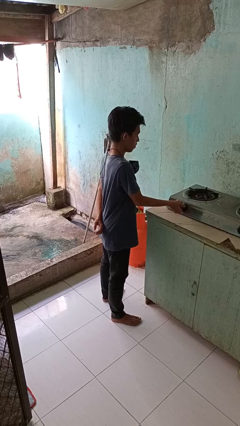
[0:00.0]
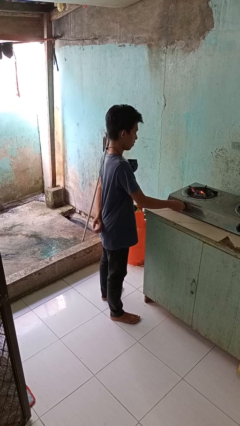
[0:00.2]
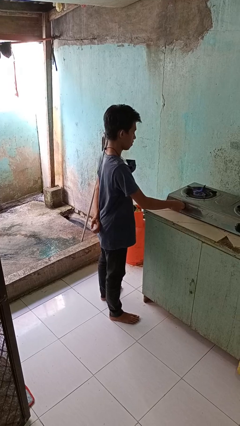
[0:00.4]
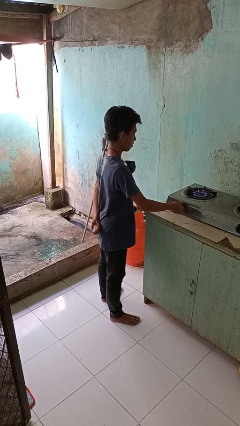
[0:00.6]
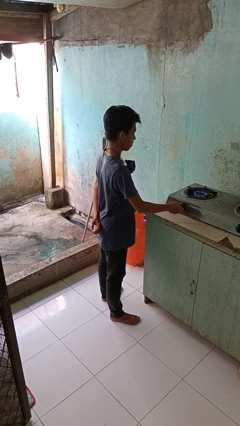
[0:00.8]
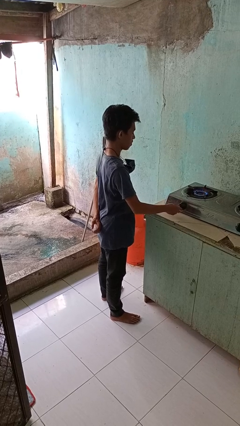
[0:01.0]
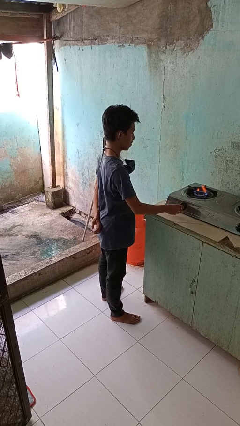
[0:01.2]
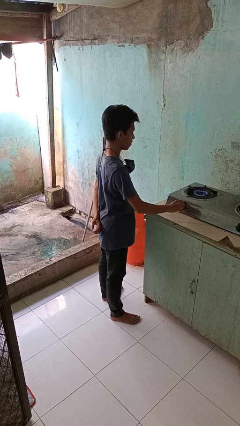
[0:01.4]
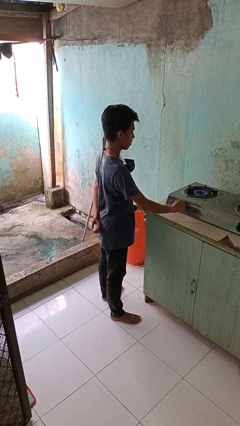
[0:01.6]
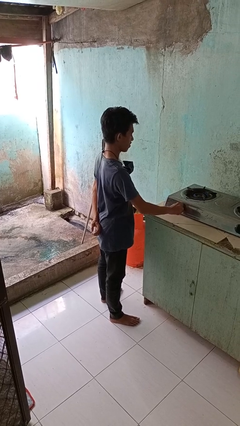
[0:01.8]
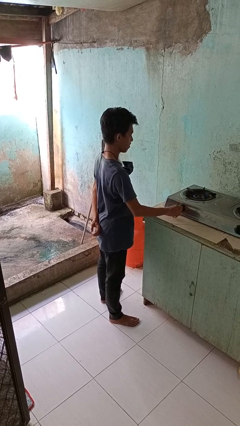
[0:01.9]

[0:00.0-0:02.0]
person turns on stovetop

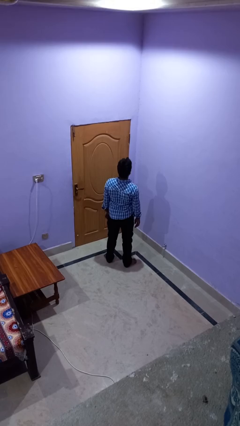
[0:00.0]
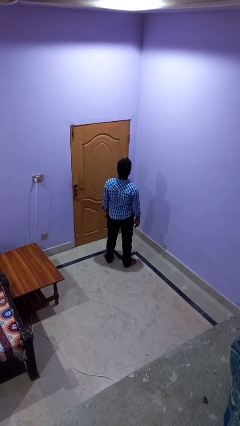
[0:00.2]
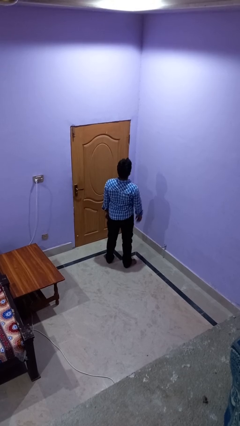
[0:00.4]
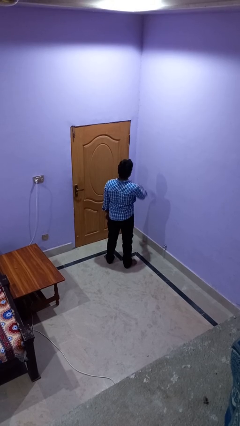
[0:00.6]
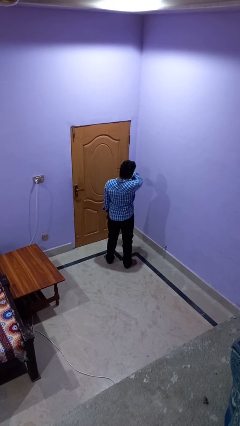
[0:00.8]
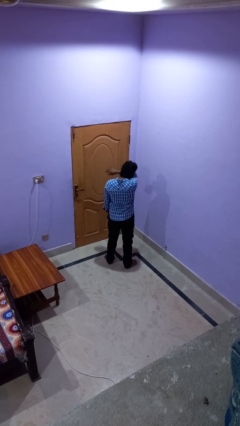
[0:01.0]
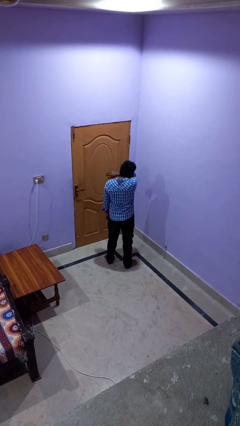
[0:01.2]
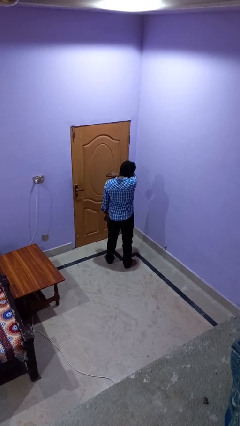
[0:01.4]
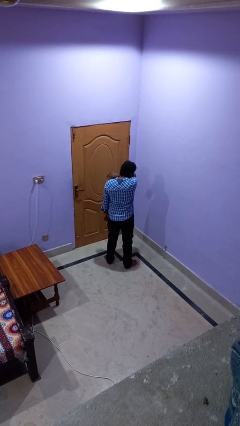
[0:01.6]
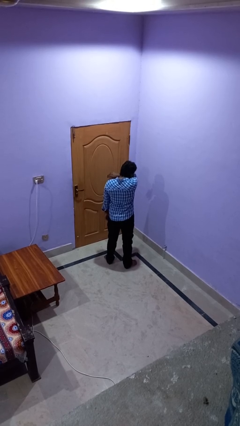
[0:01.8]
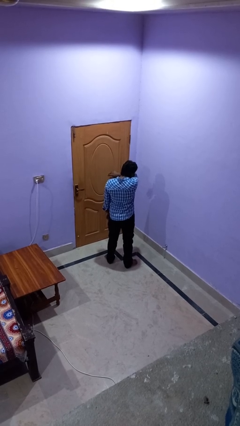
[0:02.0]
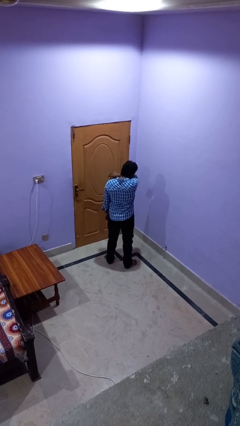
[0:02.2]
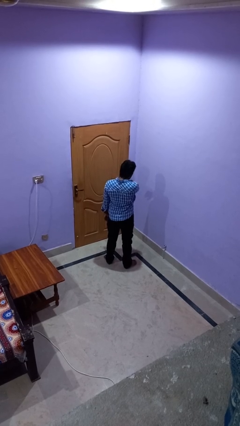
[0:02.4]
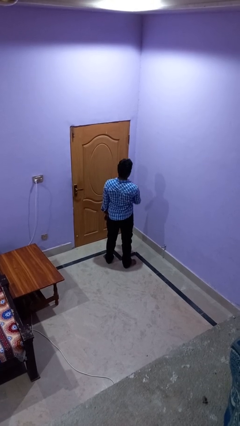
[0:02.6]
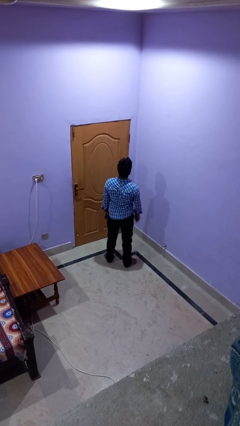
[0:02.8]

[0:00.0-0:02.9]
person sneezes into arm

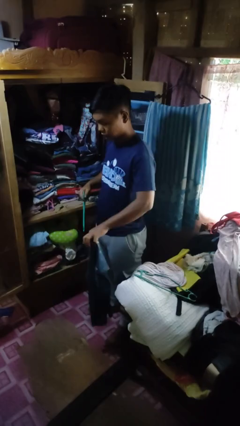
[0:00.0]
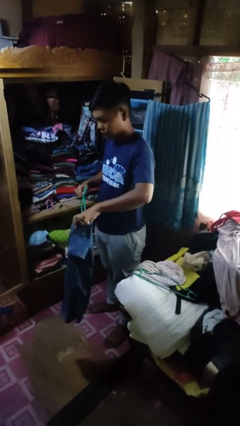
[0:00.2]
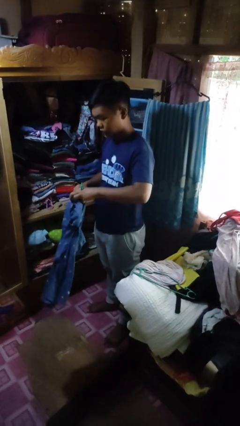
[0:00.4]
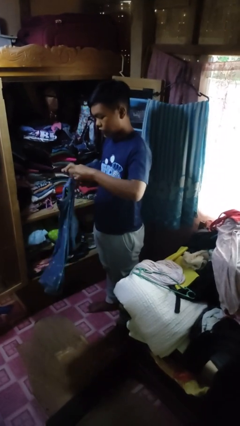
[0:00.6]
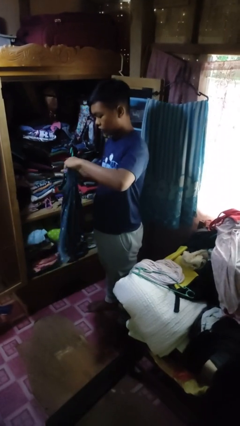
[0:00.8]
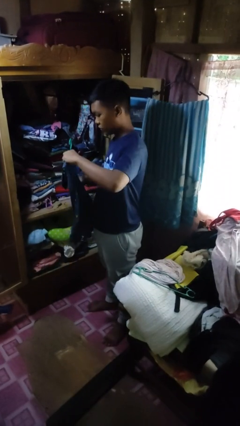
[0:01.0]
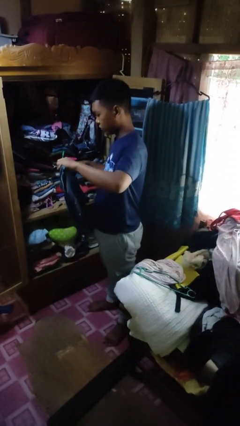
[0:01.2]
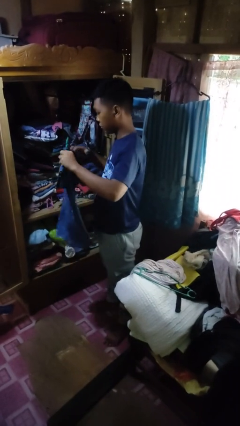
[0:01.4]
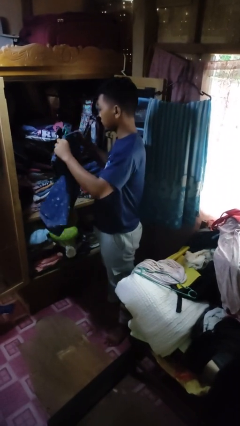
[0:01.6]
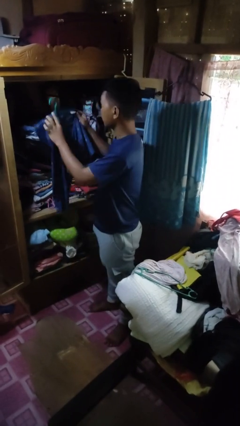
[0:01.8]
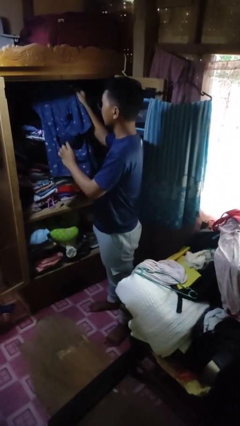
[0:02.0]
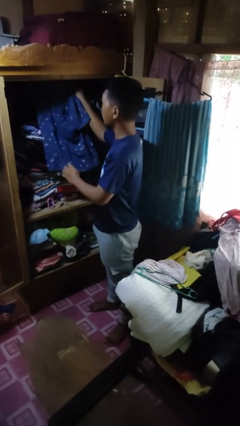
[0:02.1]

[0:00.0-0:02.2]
person puts clothes into closet

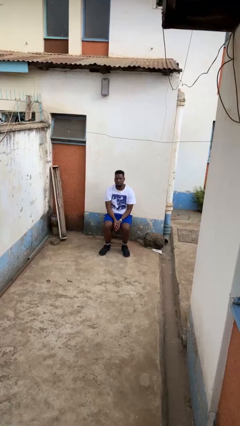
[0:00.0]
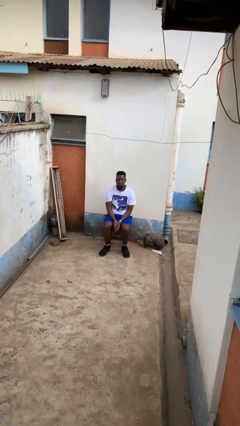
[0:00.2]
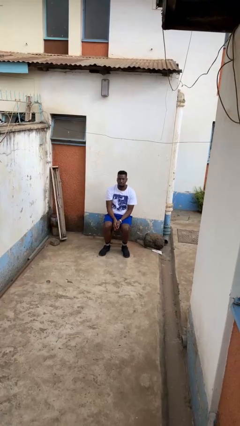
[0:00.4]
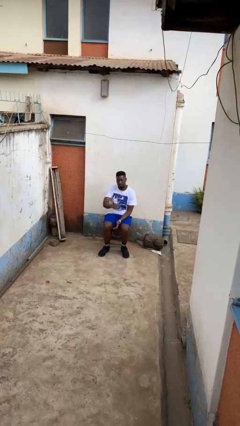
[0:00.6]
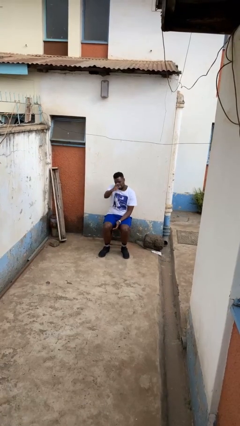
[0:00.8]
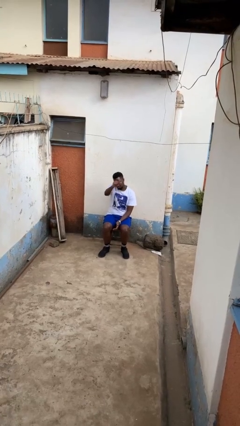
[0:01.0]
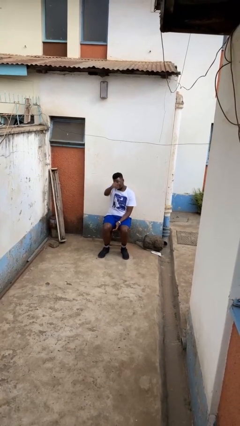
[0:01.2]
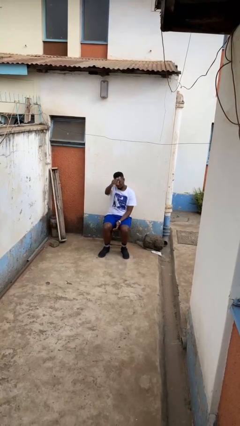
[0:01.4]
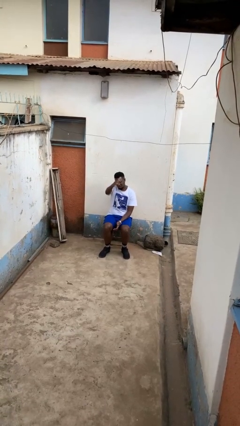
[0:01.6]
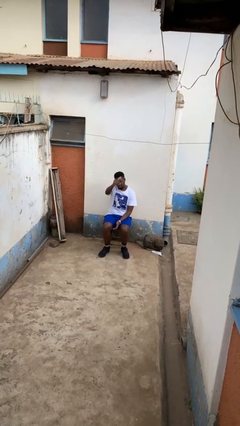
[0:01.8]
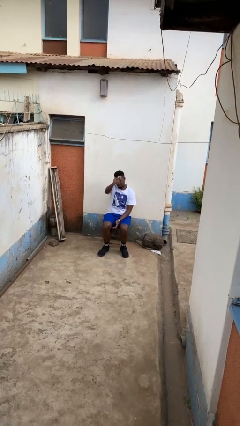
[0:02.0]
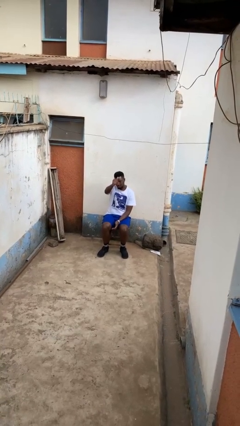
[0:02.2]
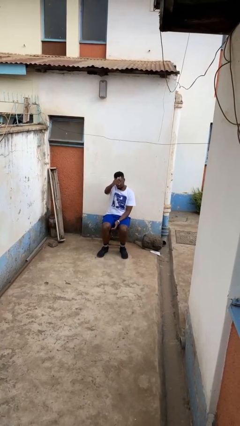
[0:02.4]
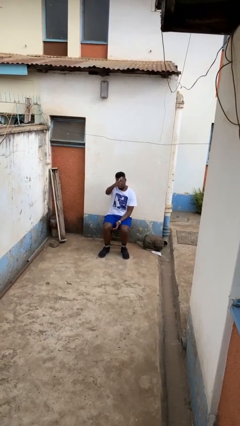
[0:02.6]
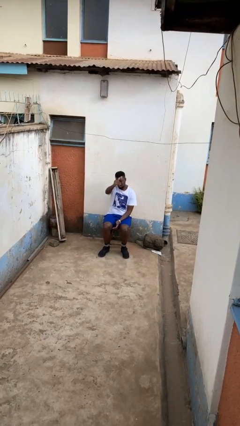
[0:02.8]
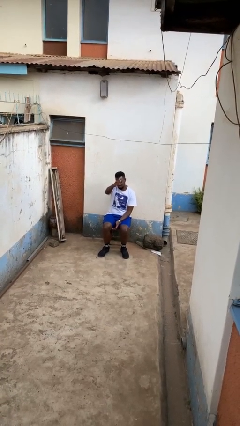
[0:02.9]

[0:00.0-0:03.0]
person gestures come here

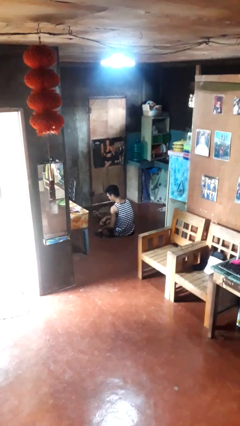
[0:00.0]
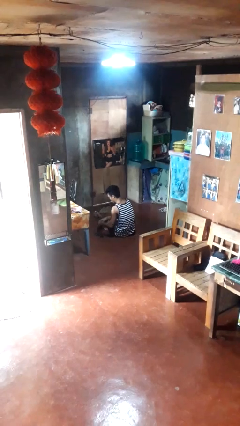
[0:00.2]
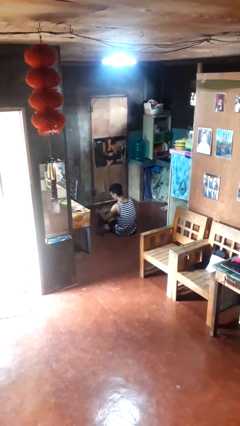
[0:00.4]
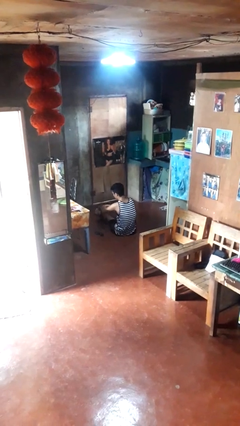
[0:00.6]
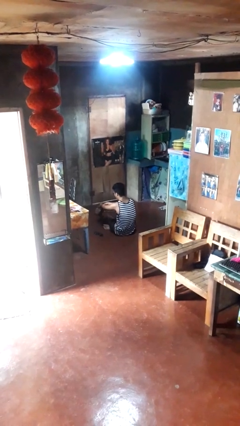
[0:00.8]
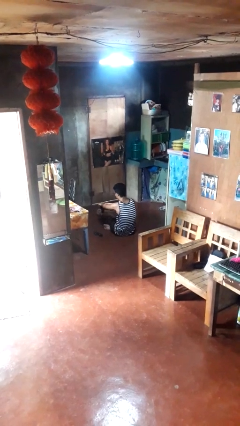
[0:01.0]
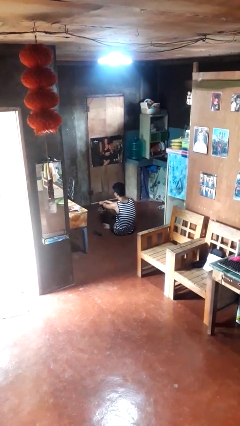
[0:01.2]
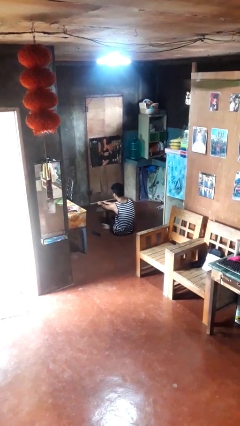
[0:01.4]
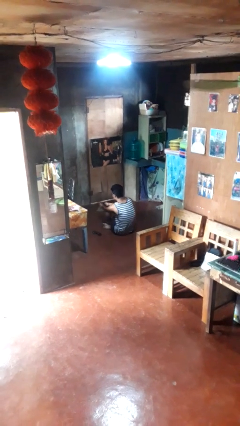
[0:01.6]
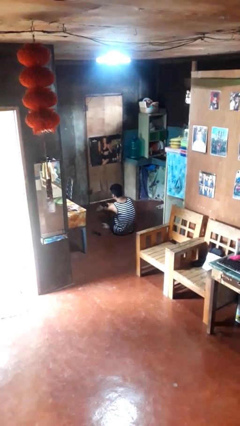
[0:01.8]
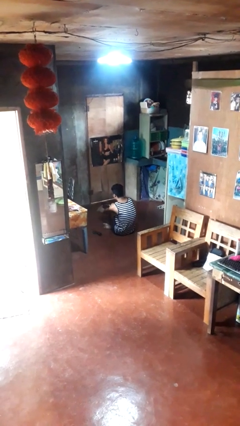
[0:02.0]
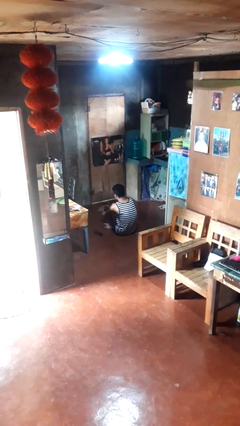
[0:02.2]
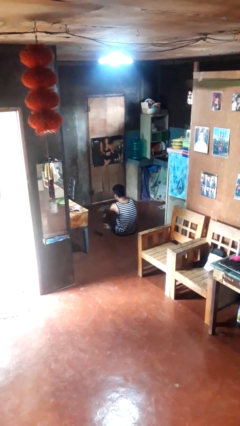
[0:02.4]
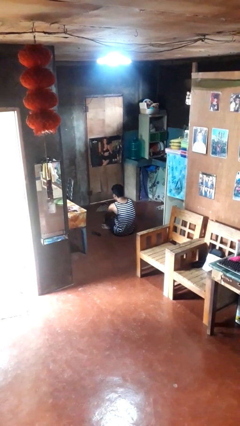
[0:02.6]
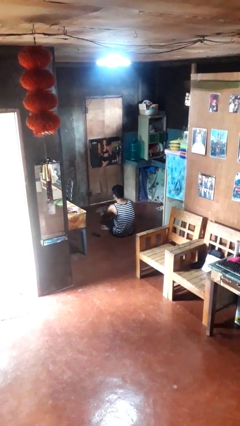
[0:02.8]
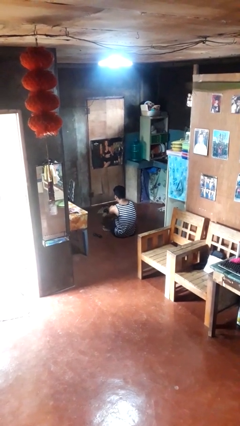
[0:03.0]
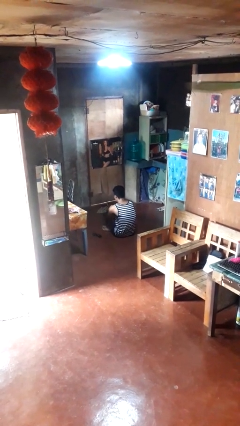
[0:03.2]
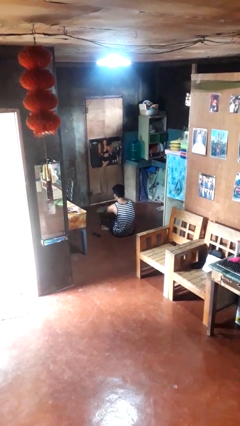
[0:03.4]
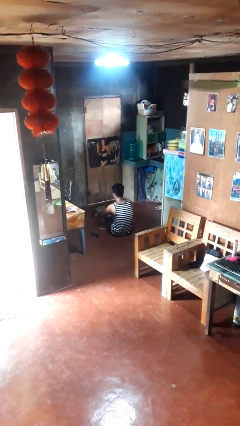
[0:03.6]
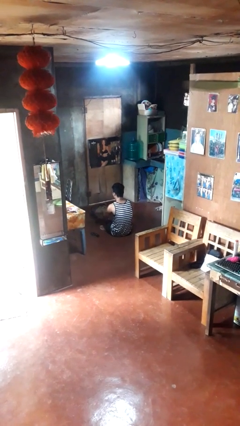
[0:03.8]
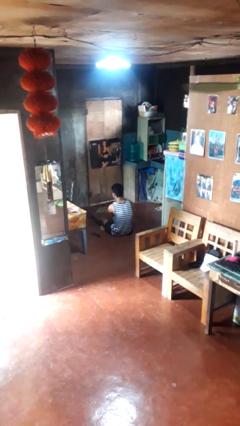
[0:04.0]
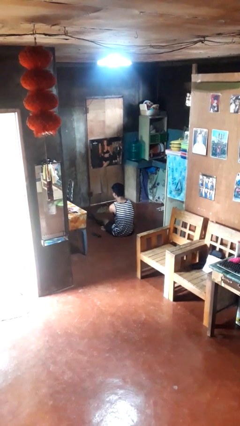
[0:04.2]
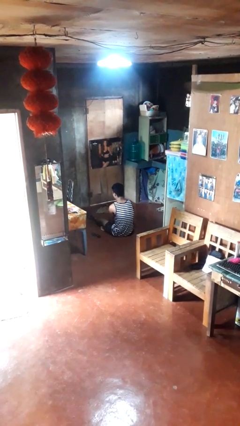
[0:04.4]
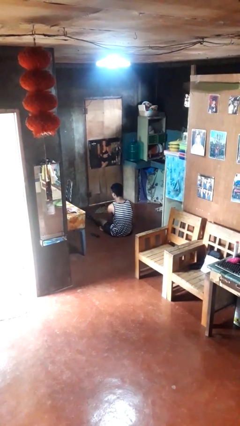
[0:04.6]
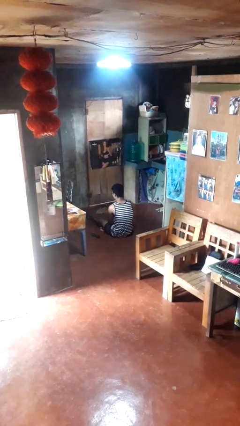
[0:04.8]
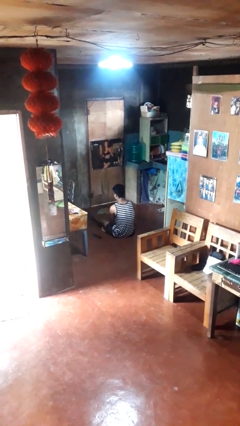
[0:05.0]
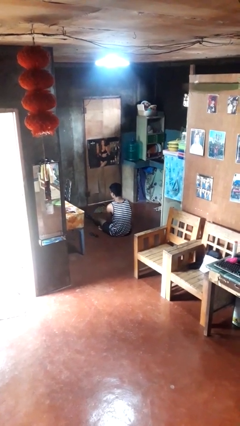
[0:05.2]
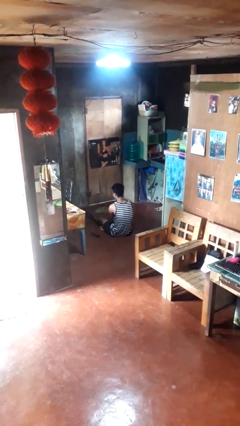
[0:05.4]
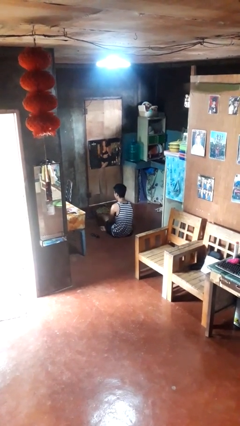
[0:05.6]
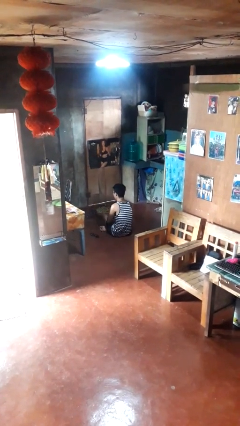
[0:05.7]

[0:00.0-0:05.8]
person puts on socks

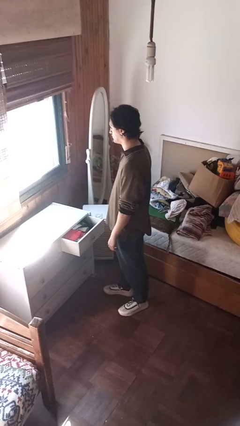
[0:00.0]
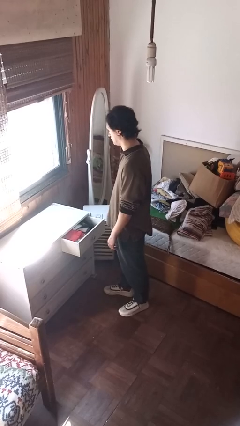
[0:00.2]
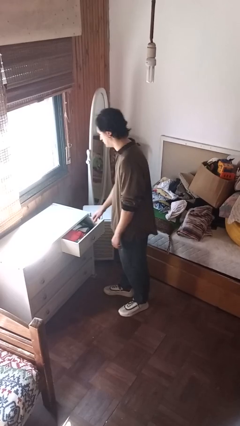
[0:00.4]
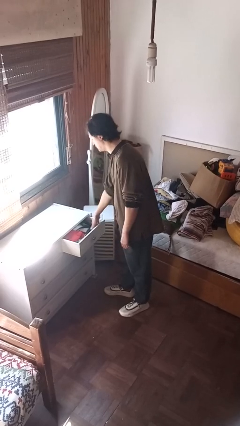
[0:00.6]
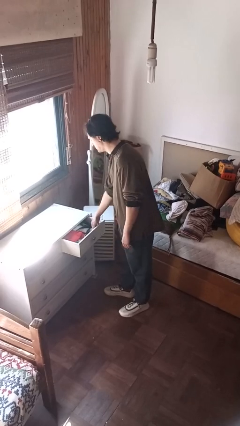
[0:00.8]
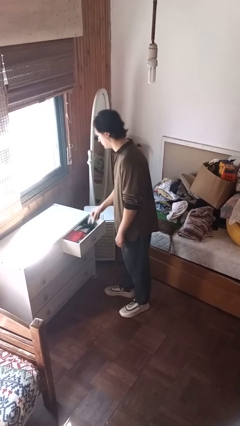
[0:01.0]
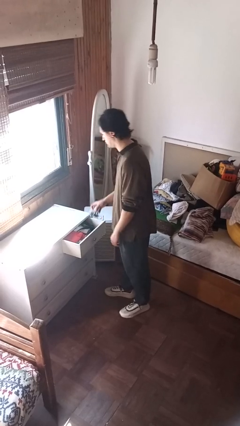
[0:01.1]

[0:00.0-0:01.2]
person takes clothes from dresser
